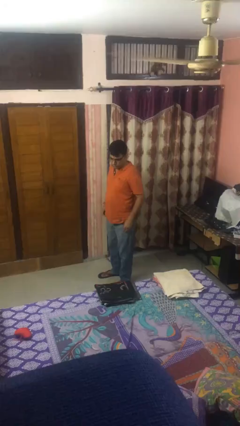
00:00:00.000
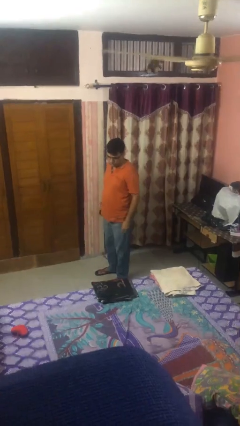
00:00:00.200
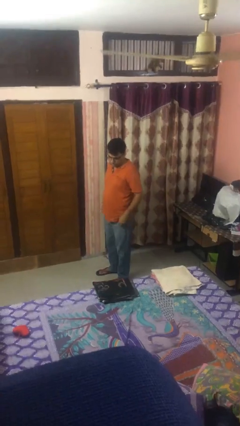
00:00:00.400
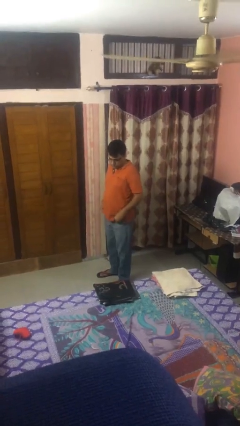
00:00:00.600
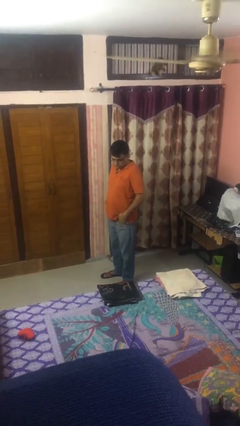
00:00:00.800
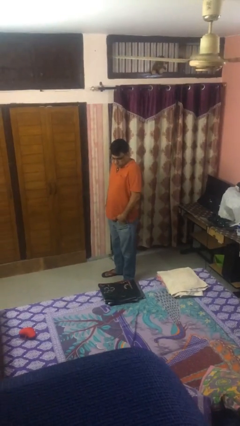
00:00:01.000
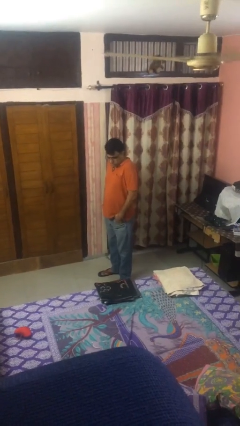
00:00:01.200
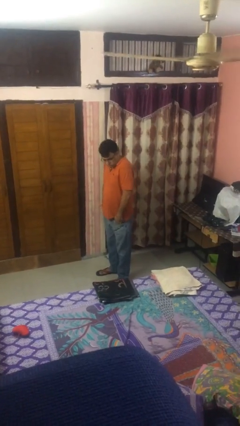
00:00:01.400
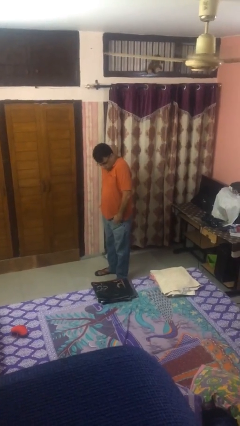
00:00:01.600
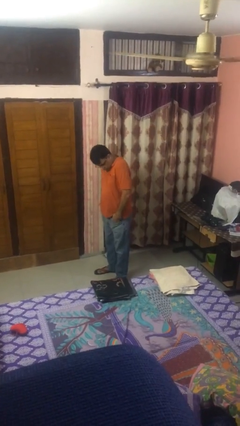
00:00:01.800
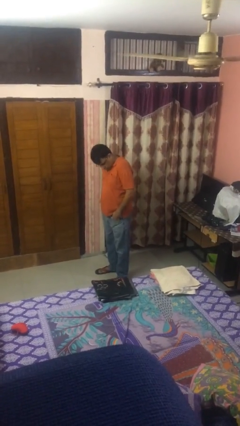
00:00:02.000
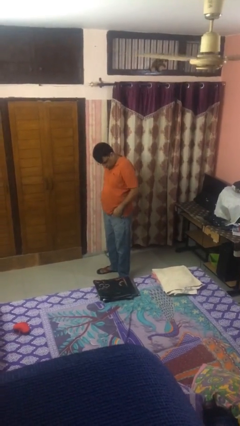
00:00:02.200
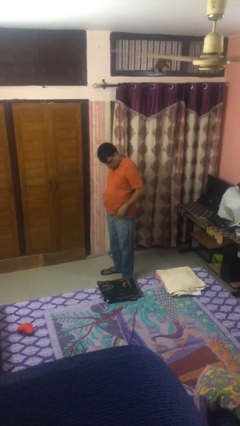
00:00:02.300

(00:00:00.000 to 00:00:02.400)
person puts hands in back pockets

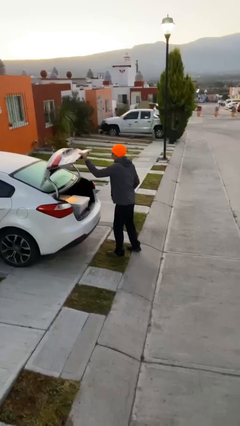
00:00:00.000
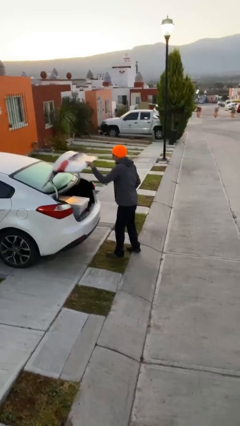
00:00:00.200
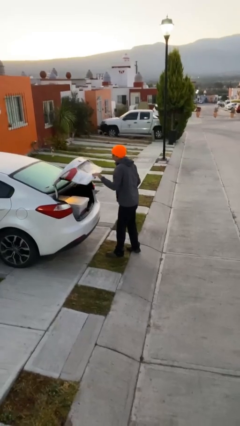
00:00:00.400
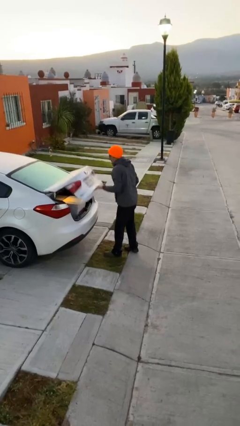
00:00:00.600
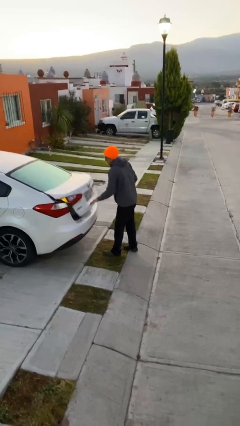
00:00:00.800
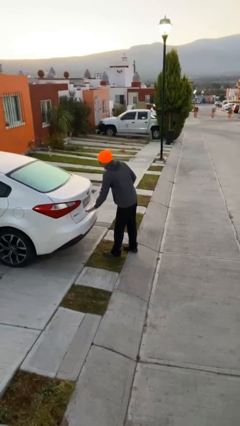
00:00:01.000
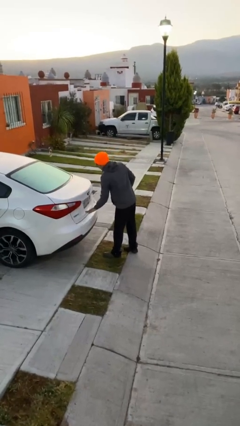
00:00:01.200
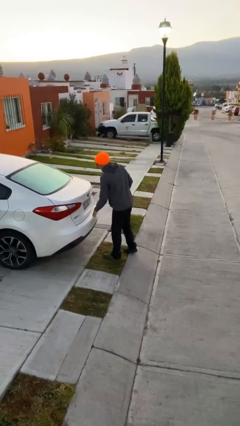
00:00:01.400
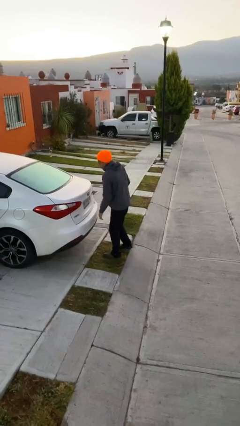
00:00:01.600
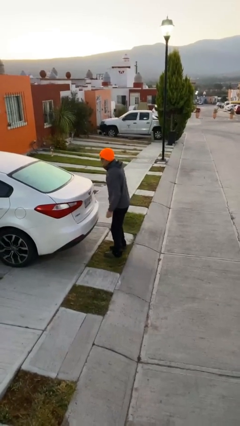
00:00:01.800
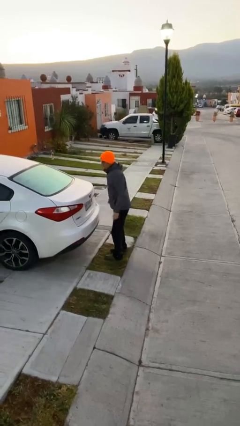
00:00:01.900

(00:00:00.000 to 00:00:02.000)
person closes car trunk

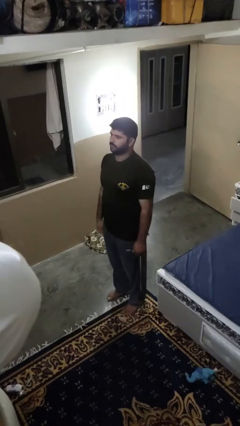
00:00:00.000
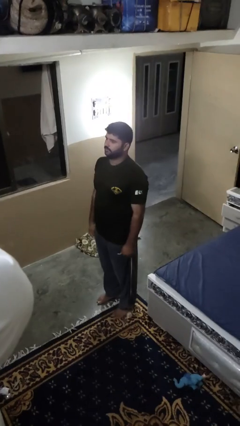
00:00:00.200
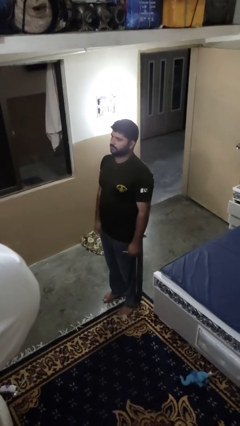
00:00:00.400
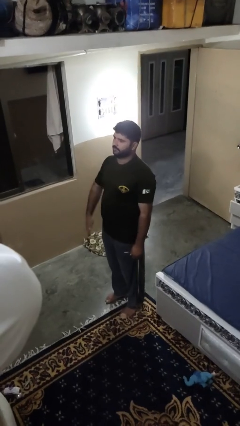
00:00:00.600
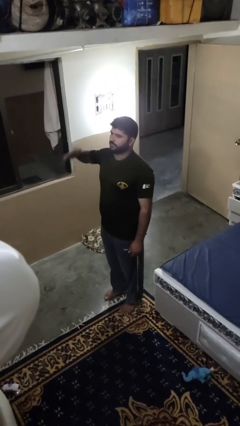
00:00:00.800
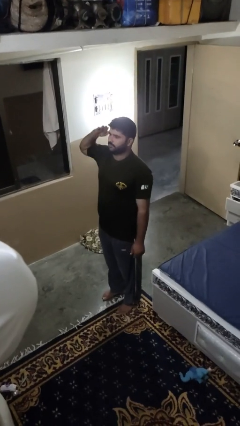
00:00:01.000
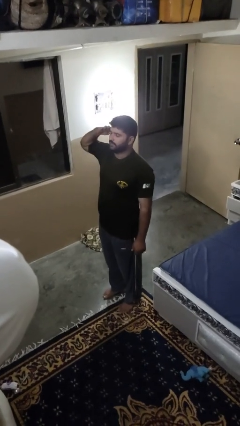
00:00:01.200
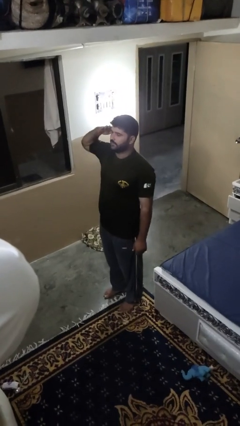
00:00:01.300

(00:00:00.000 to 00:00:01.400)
person salutes

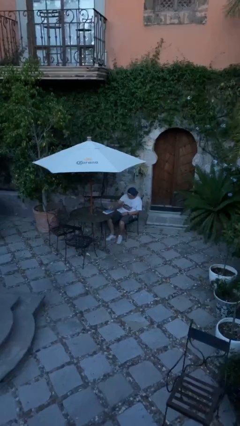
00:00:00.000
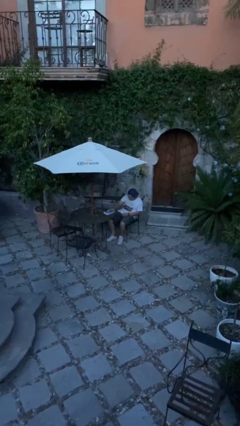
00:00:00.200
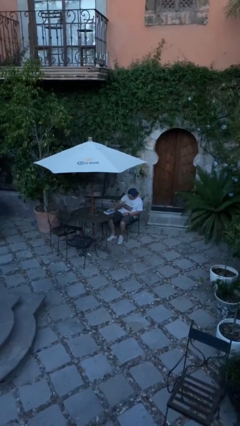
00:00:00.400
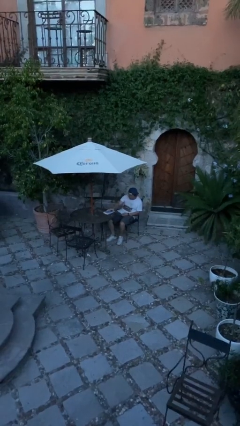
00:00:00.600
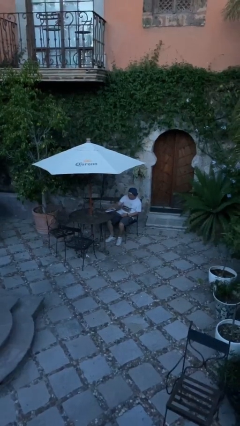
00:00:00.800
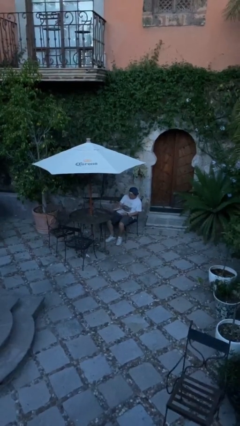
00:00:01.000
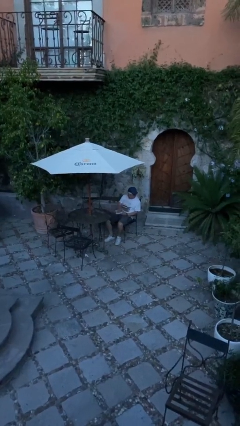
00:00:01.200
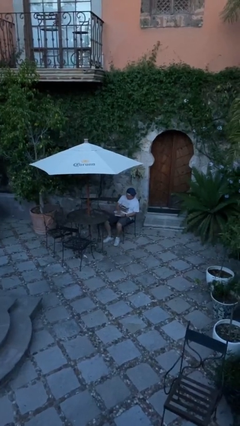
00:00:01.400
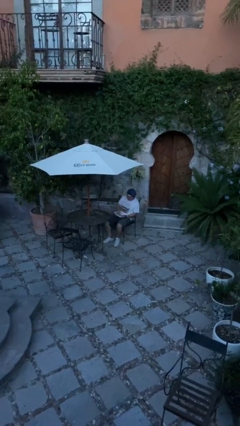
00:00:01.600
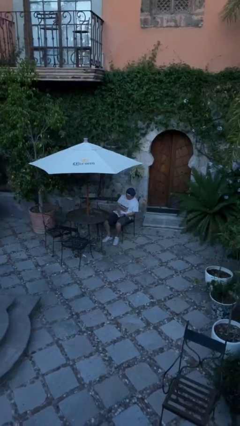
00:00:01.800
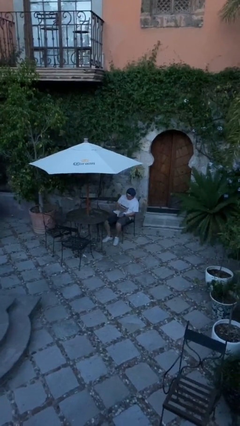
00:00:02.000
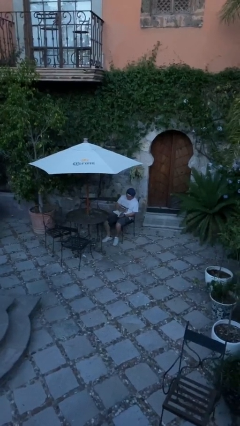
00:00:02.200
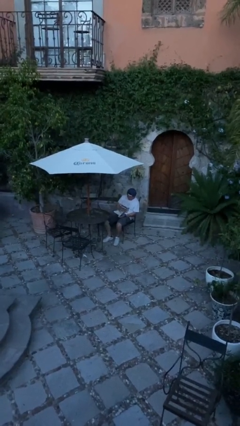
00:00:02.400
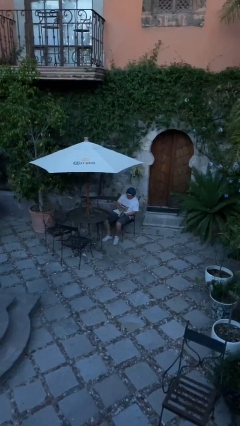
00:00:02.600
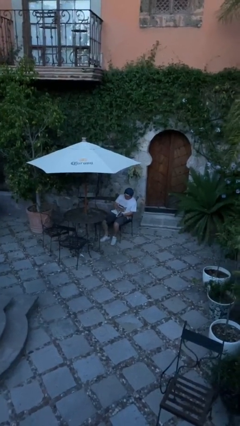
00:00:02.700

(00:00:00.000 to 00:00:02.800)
person picks up object from table

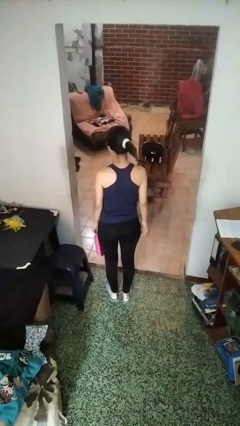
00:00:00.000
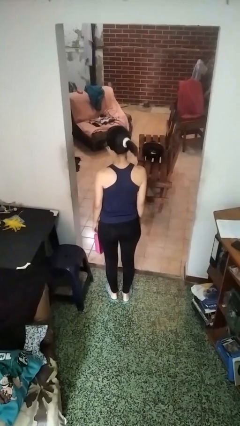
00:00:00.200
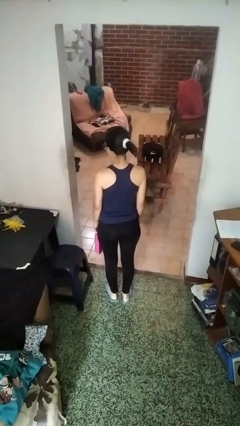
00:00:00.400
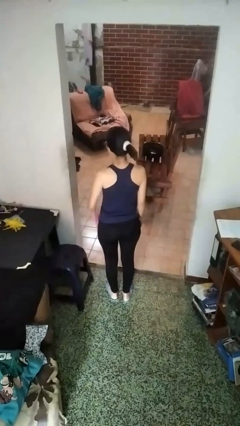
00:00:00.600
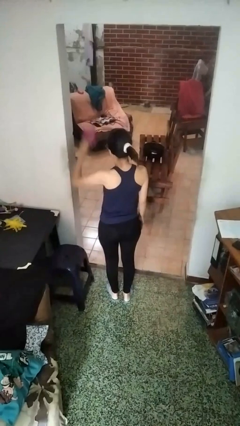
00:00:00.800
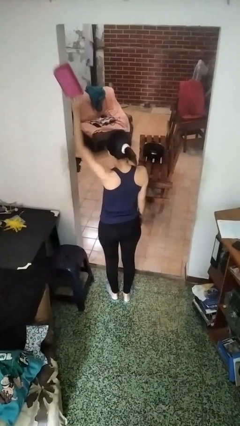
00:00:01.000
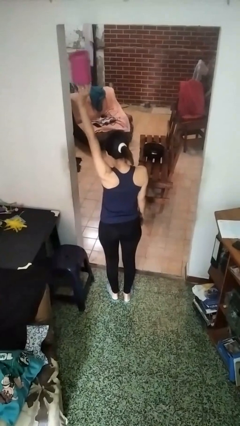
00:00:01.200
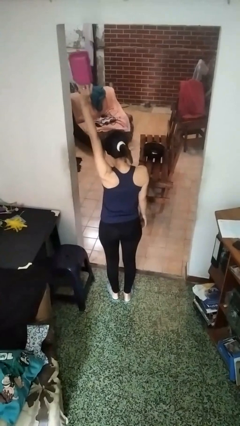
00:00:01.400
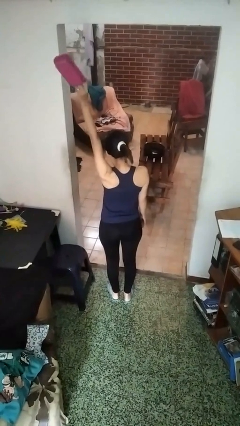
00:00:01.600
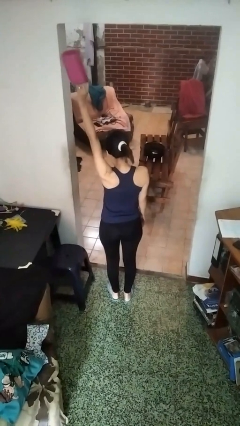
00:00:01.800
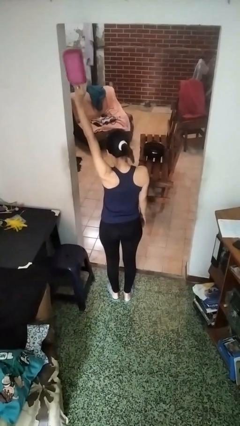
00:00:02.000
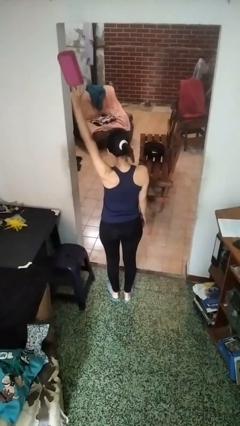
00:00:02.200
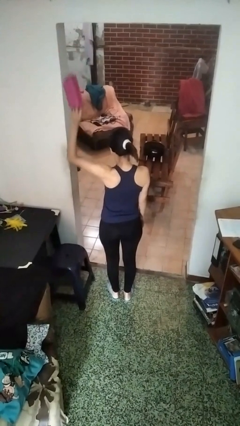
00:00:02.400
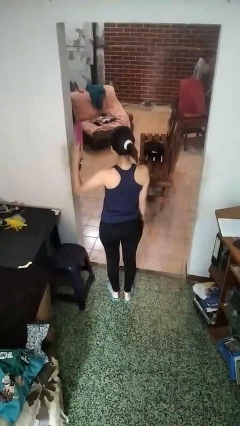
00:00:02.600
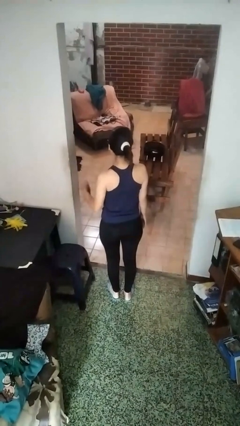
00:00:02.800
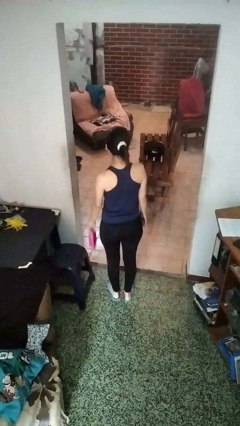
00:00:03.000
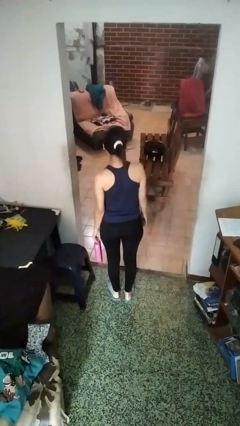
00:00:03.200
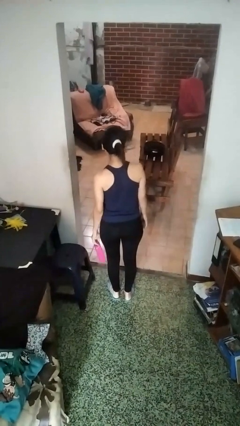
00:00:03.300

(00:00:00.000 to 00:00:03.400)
person holds object above head

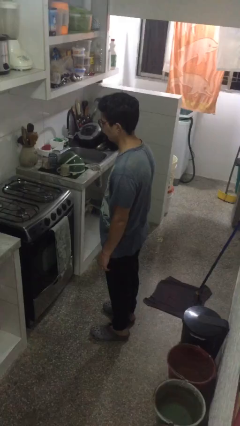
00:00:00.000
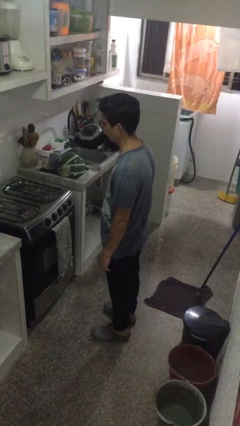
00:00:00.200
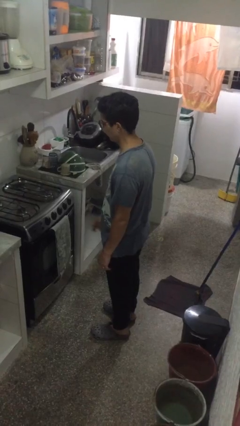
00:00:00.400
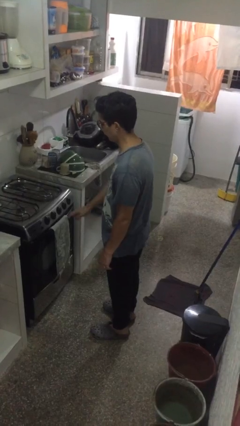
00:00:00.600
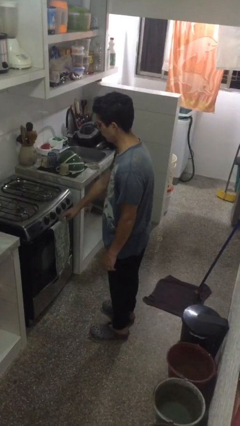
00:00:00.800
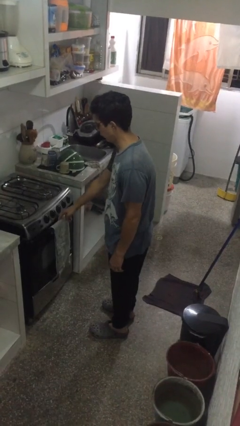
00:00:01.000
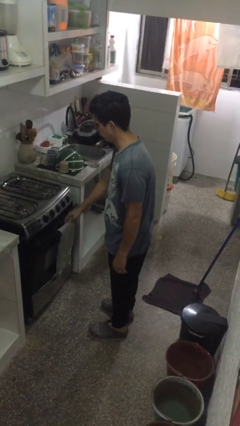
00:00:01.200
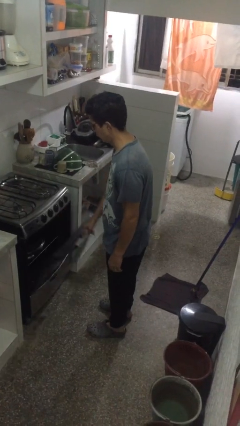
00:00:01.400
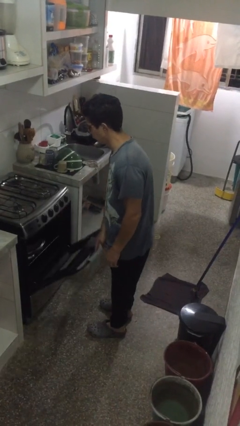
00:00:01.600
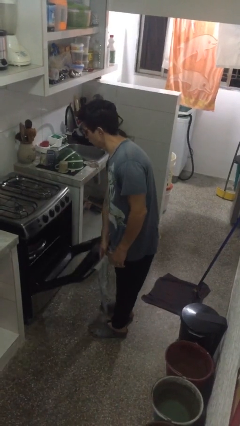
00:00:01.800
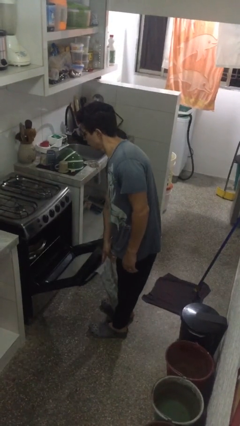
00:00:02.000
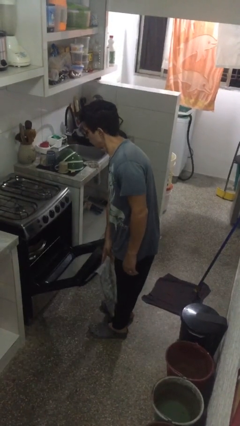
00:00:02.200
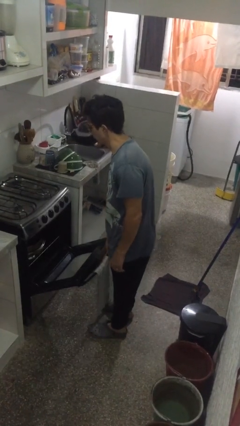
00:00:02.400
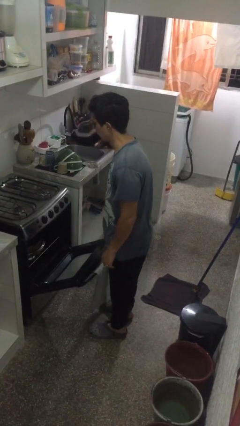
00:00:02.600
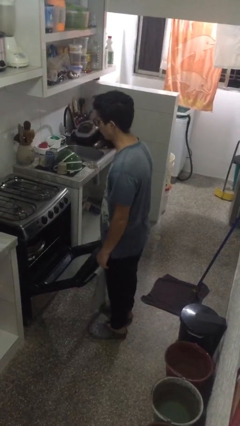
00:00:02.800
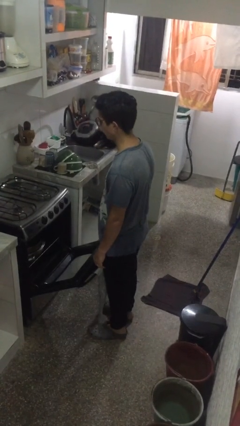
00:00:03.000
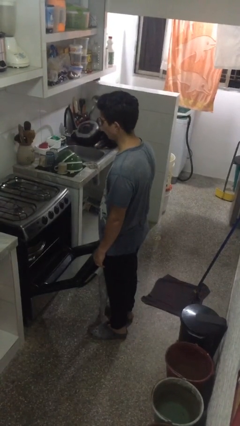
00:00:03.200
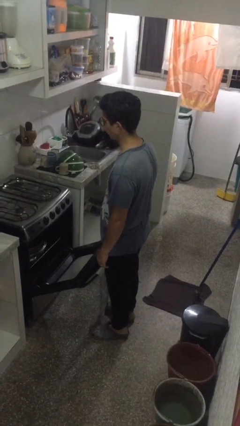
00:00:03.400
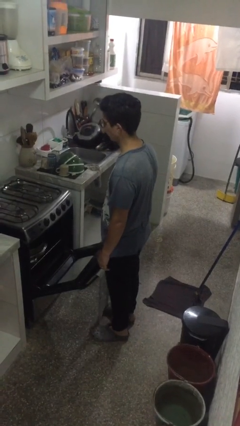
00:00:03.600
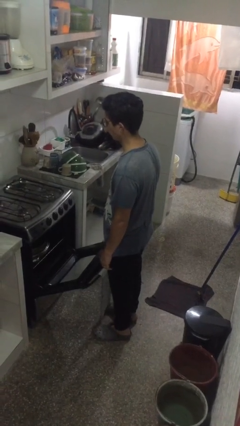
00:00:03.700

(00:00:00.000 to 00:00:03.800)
person opens oven door

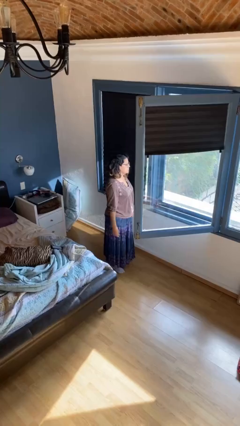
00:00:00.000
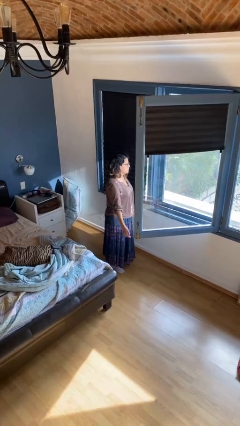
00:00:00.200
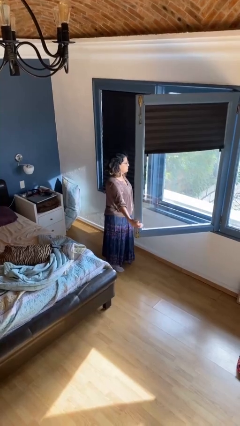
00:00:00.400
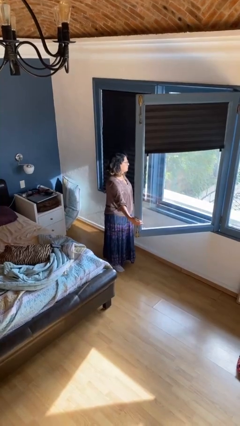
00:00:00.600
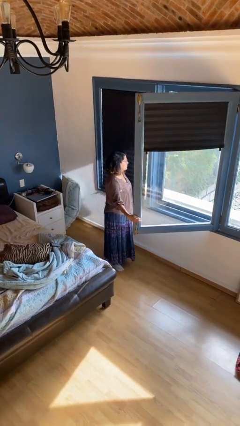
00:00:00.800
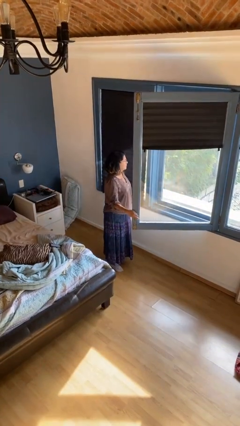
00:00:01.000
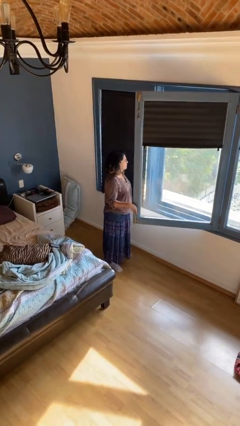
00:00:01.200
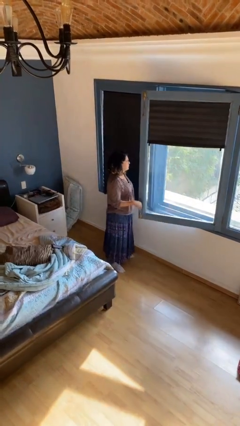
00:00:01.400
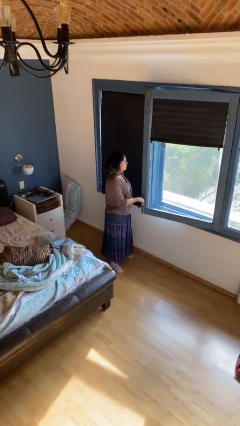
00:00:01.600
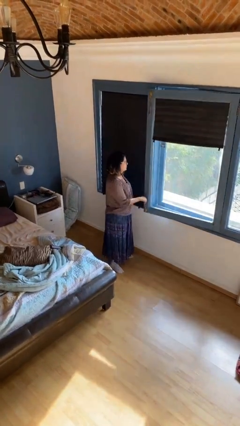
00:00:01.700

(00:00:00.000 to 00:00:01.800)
person closes home window
